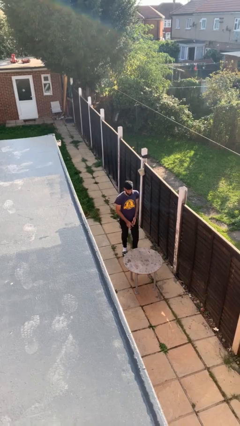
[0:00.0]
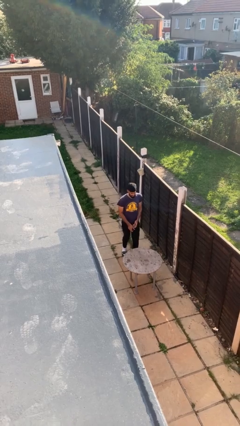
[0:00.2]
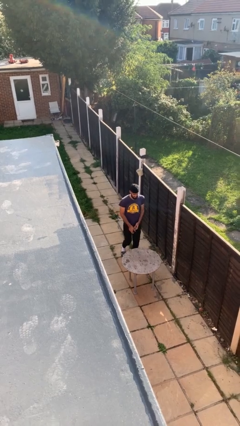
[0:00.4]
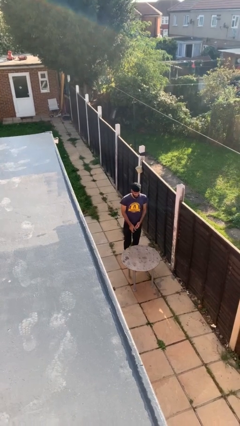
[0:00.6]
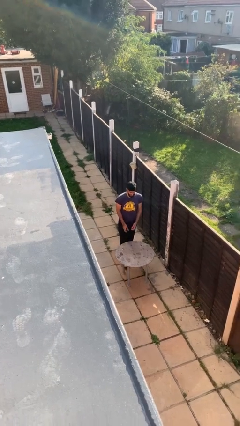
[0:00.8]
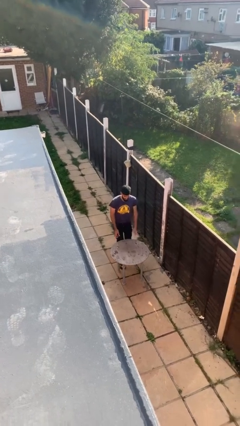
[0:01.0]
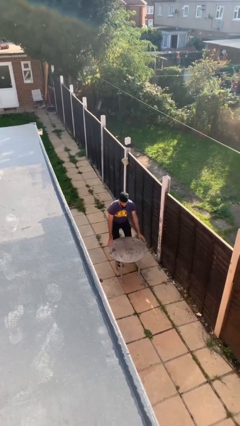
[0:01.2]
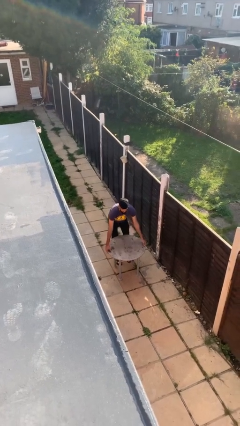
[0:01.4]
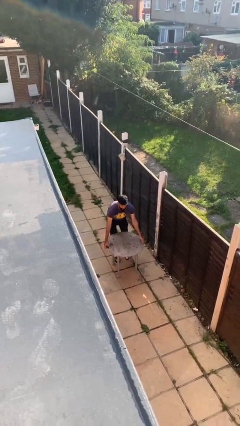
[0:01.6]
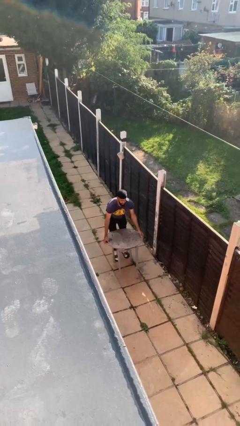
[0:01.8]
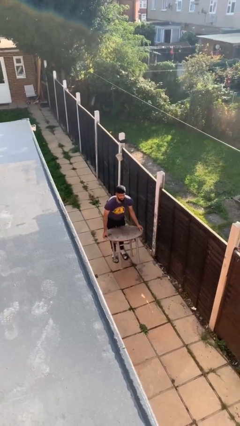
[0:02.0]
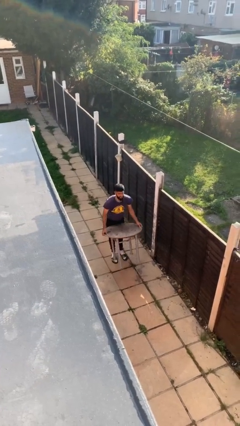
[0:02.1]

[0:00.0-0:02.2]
person picks up object from floor

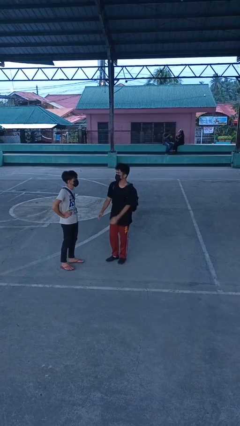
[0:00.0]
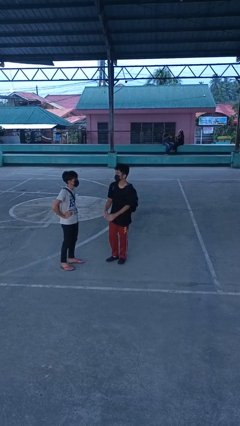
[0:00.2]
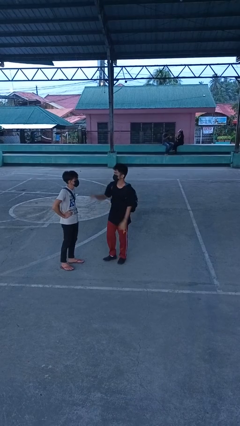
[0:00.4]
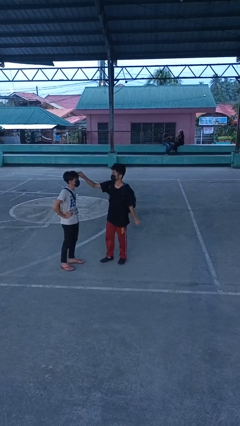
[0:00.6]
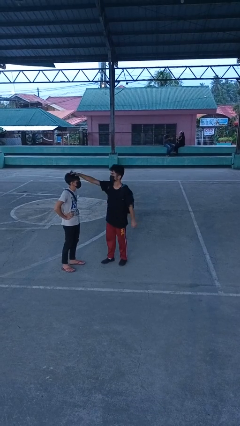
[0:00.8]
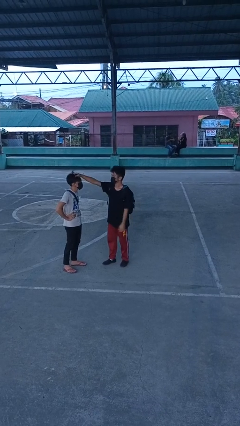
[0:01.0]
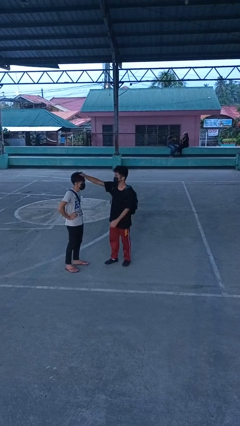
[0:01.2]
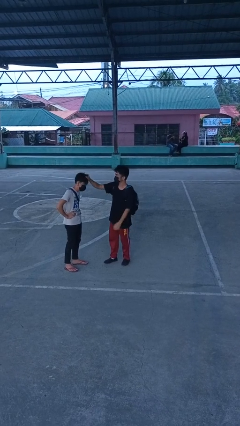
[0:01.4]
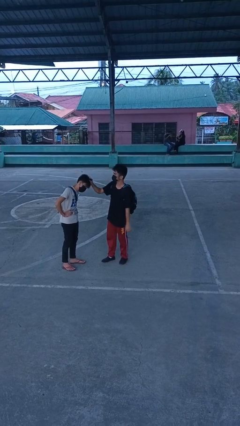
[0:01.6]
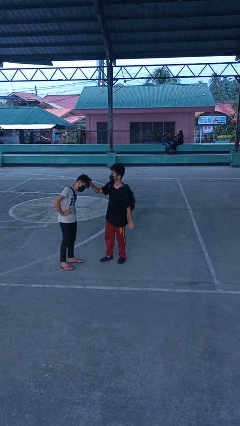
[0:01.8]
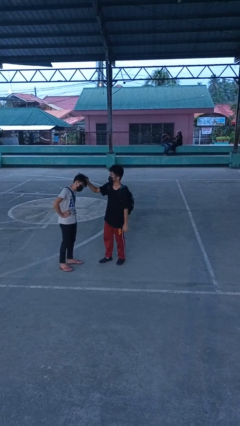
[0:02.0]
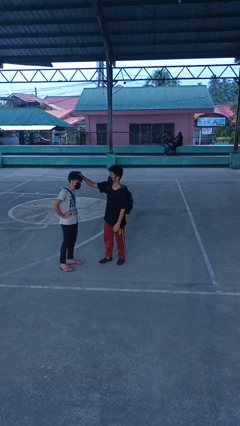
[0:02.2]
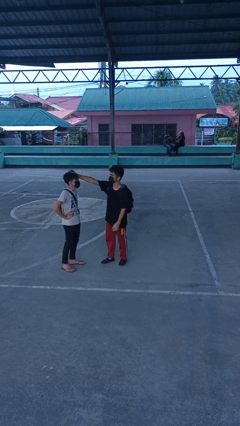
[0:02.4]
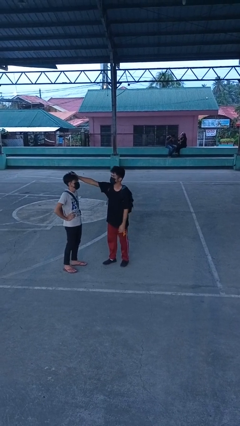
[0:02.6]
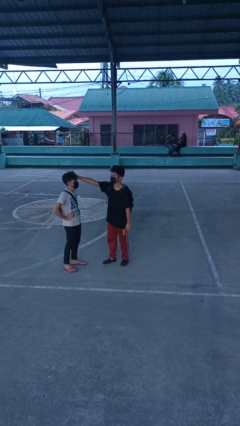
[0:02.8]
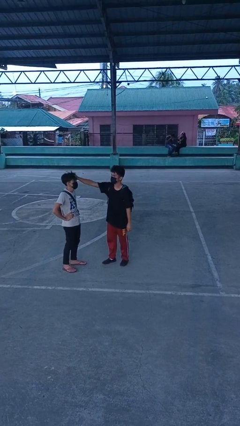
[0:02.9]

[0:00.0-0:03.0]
person grabs person by hair

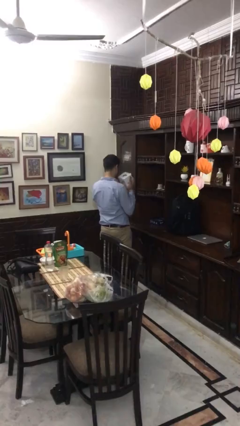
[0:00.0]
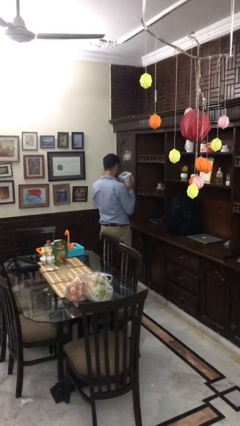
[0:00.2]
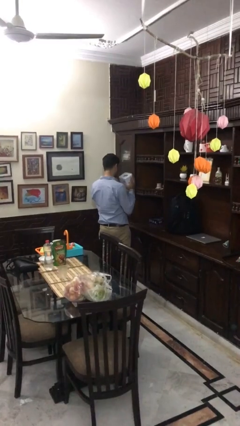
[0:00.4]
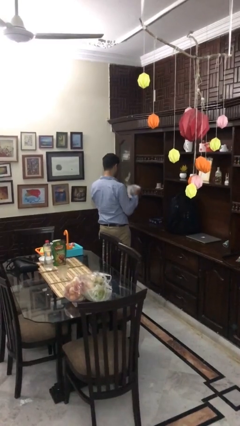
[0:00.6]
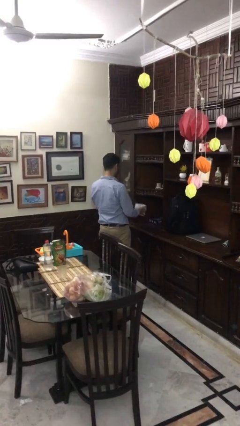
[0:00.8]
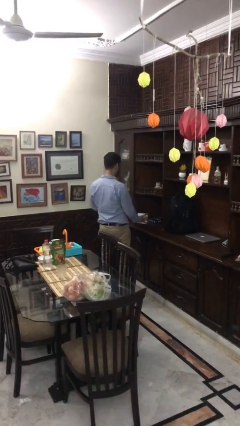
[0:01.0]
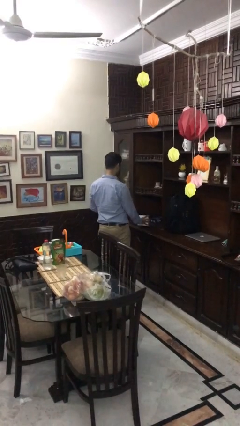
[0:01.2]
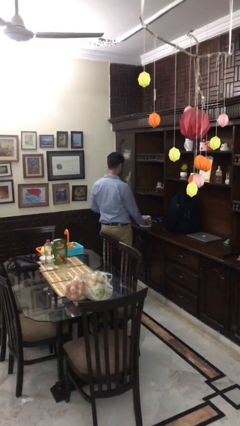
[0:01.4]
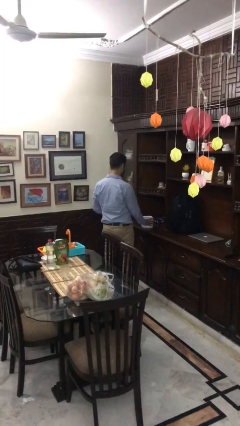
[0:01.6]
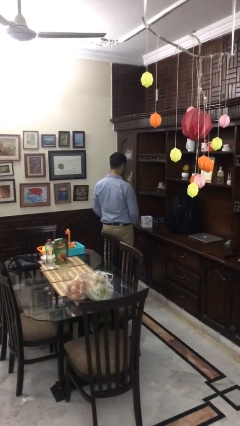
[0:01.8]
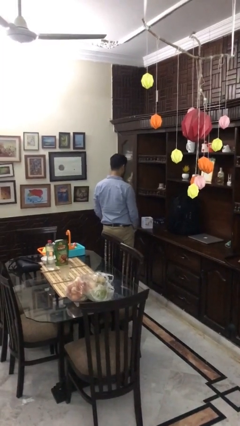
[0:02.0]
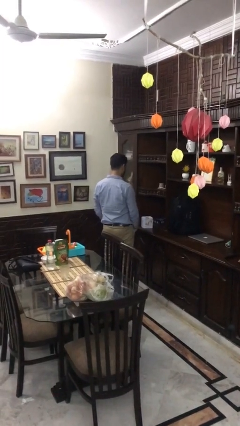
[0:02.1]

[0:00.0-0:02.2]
person puts down object on countertop

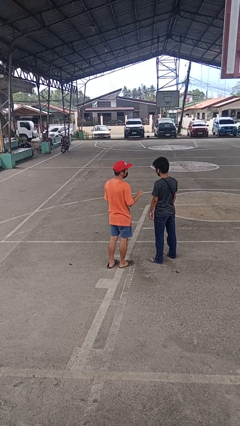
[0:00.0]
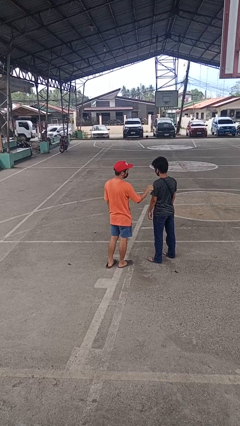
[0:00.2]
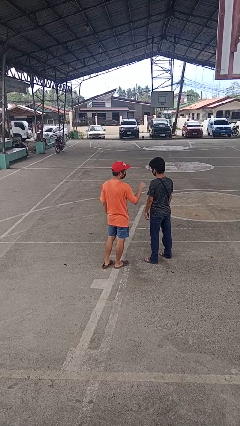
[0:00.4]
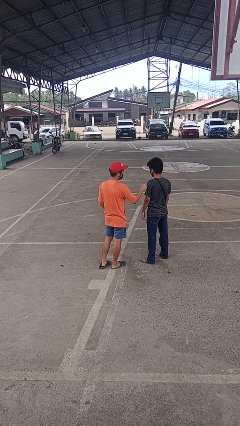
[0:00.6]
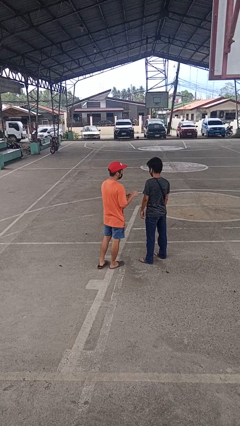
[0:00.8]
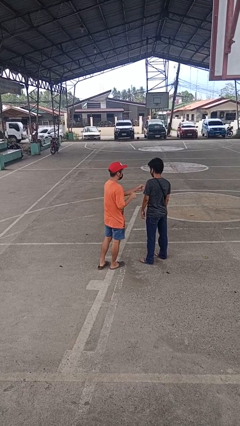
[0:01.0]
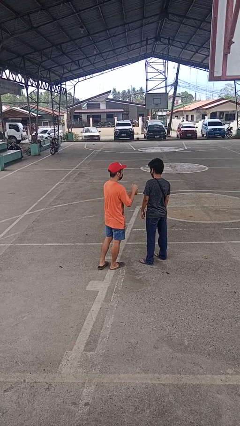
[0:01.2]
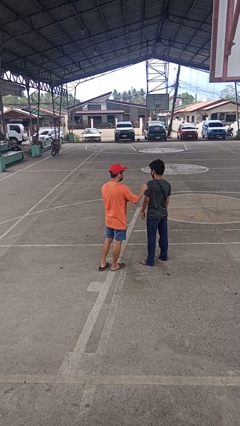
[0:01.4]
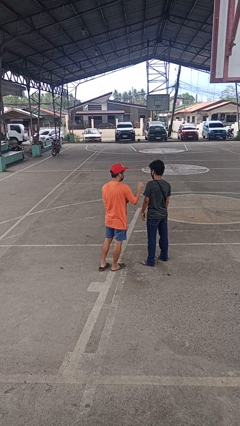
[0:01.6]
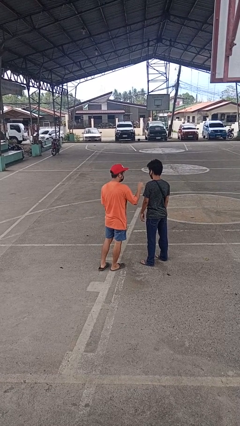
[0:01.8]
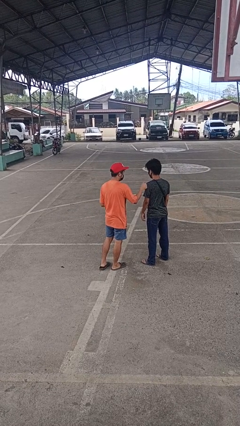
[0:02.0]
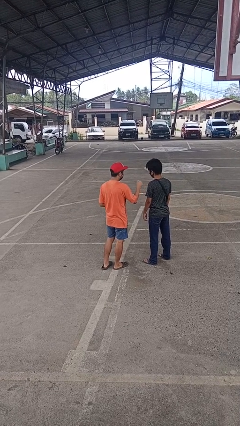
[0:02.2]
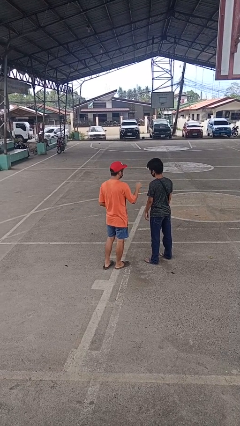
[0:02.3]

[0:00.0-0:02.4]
person pounds shoulders of person

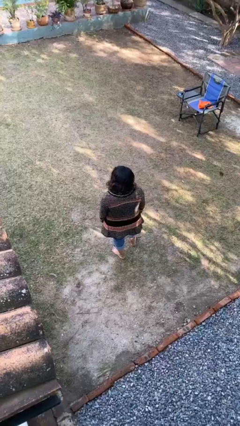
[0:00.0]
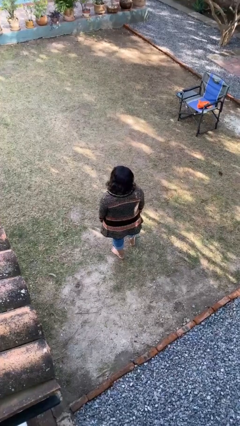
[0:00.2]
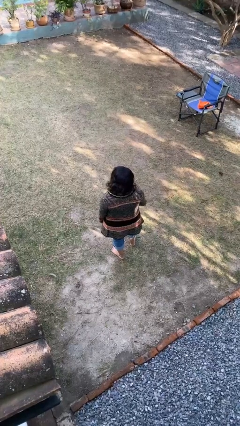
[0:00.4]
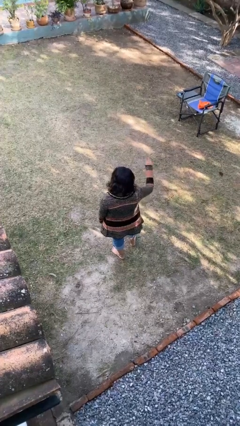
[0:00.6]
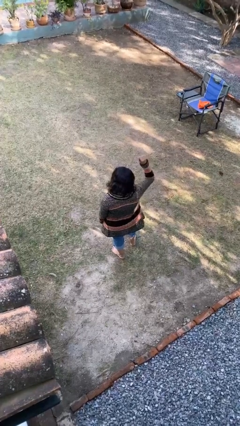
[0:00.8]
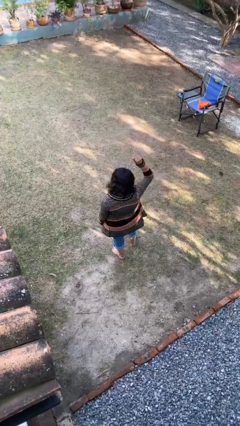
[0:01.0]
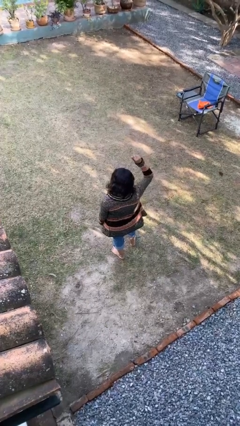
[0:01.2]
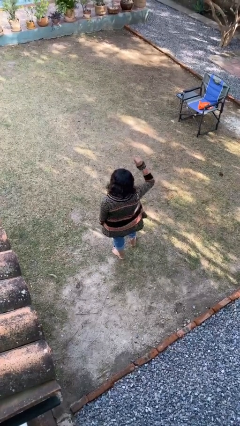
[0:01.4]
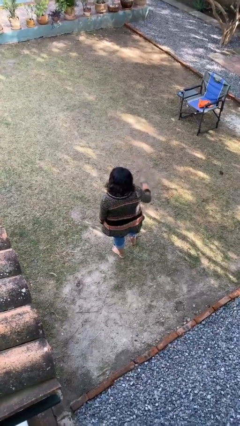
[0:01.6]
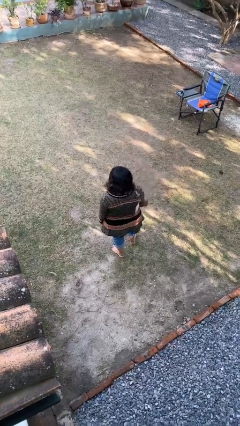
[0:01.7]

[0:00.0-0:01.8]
person gestures number one

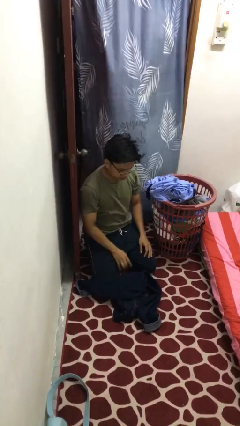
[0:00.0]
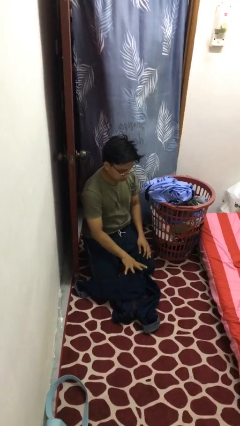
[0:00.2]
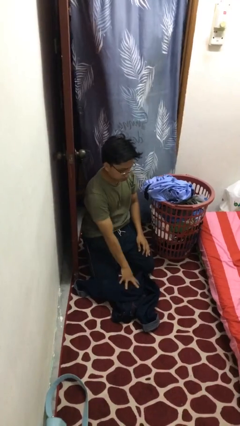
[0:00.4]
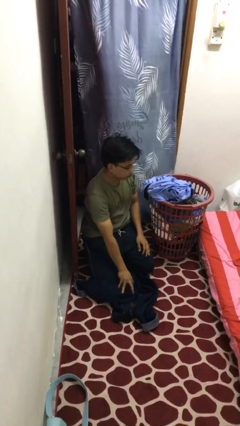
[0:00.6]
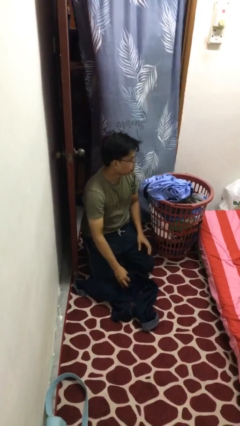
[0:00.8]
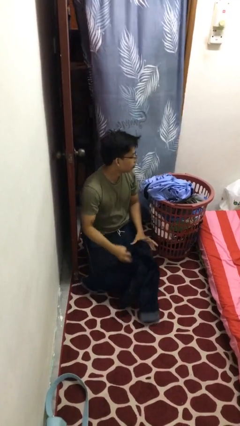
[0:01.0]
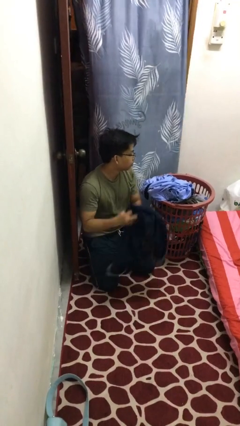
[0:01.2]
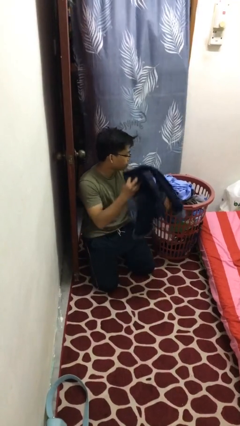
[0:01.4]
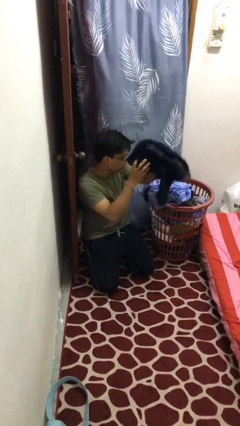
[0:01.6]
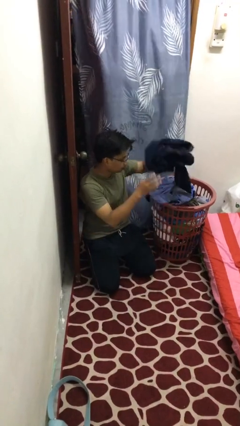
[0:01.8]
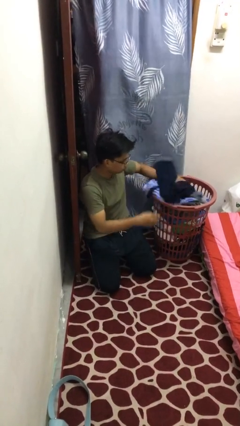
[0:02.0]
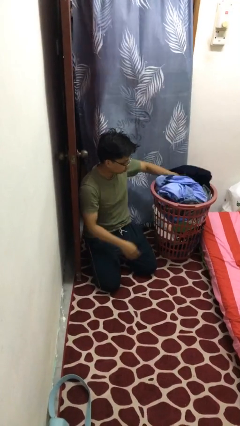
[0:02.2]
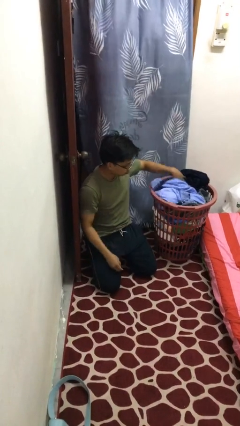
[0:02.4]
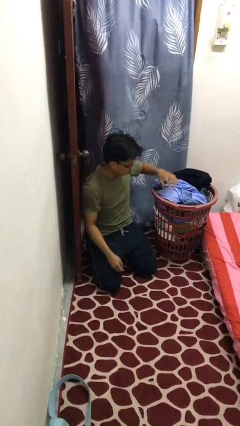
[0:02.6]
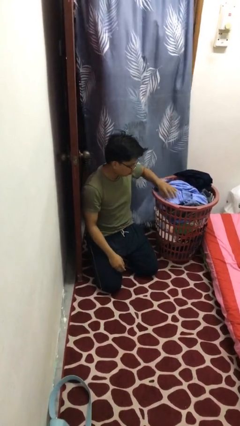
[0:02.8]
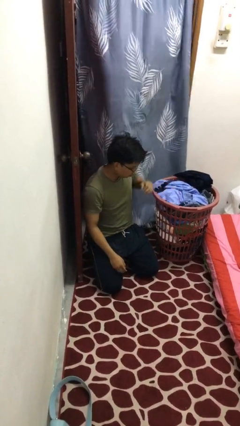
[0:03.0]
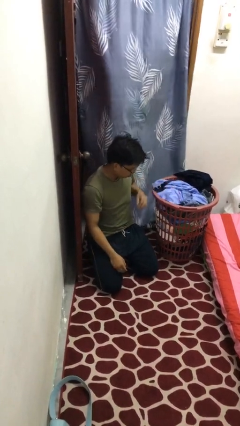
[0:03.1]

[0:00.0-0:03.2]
person puts object into basket

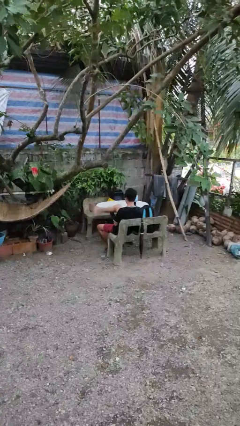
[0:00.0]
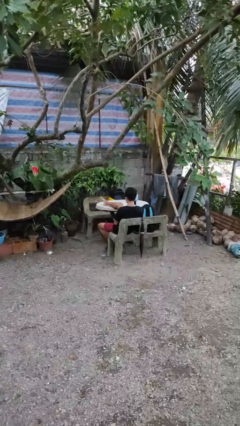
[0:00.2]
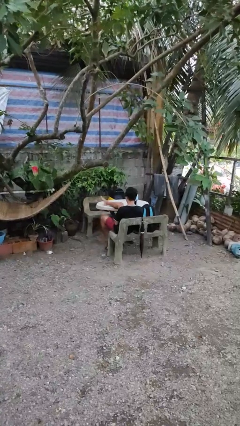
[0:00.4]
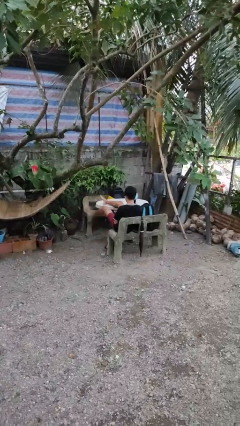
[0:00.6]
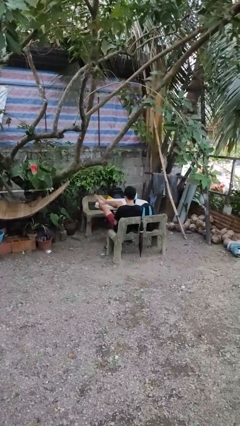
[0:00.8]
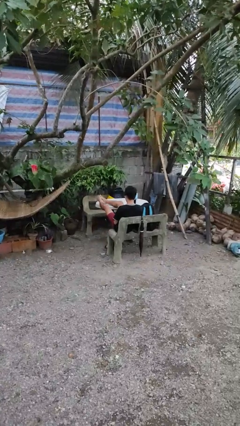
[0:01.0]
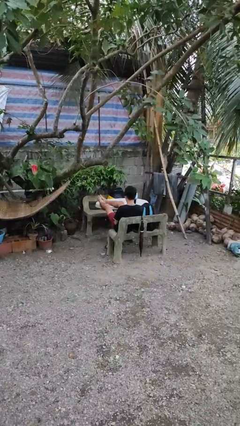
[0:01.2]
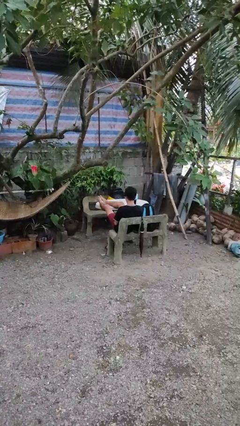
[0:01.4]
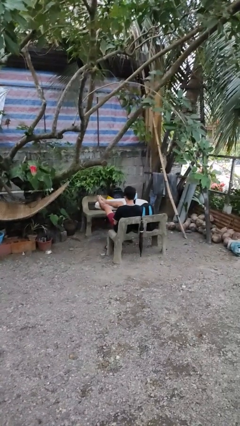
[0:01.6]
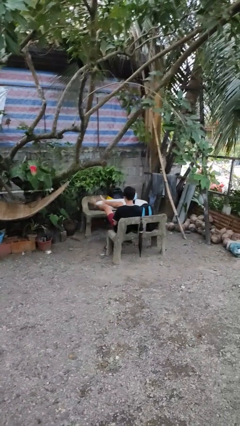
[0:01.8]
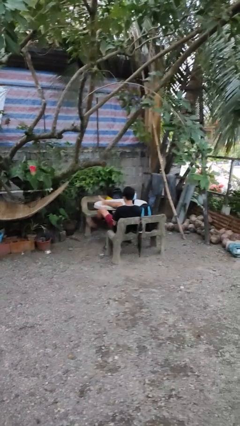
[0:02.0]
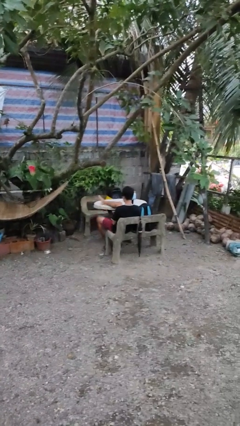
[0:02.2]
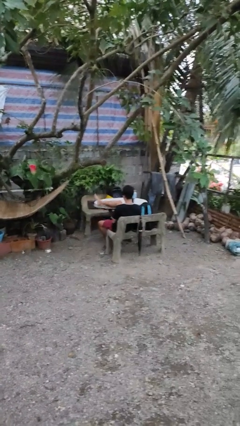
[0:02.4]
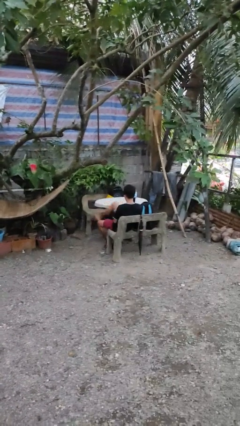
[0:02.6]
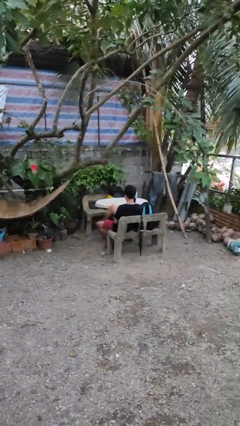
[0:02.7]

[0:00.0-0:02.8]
person puts feet up
